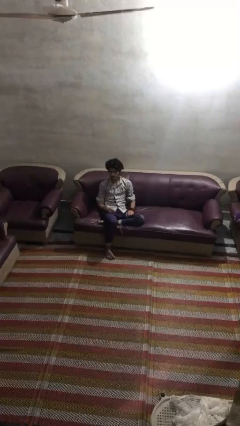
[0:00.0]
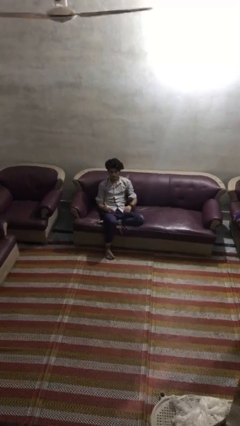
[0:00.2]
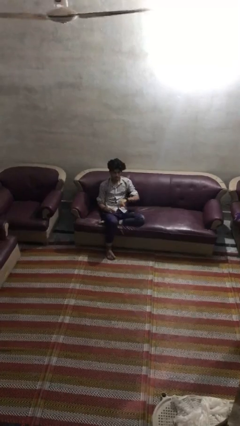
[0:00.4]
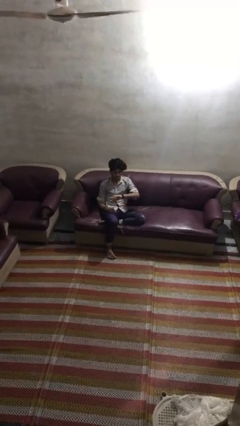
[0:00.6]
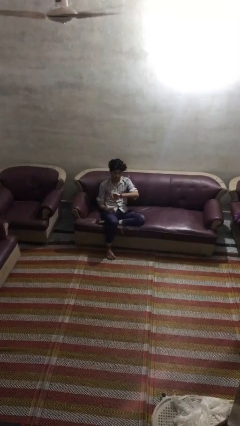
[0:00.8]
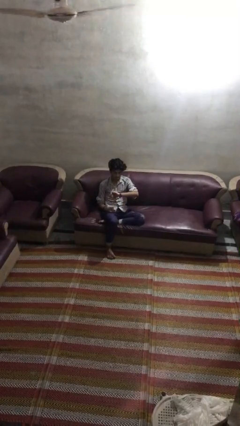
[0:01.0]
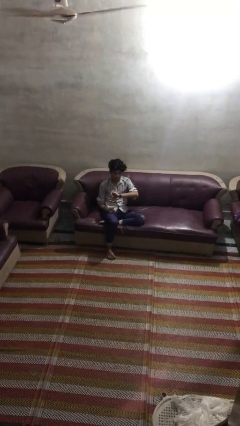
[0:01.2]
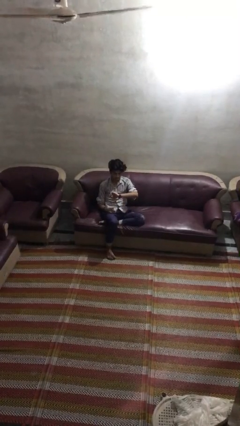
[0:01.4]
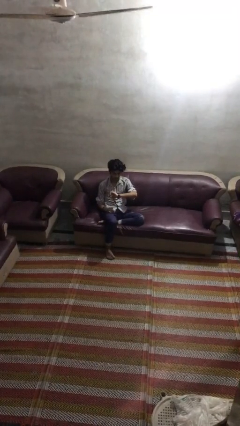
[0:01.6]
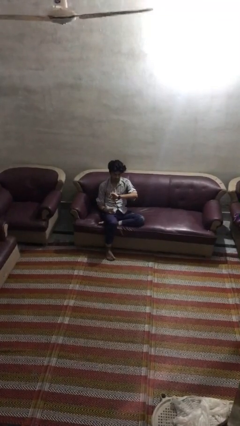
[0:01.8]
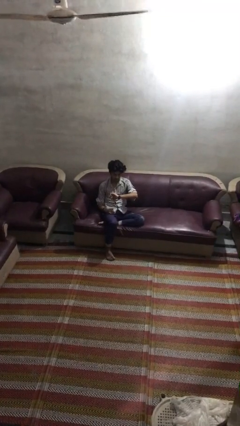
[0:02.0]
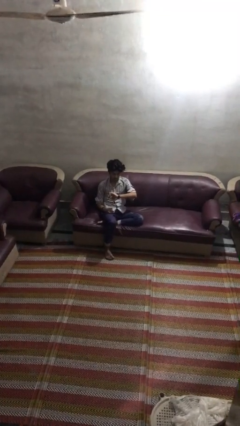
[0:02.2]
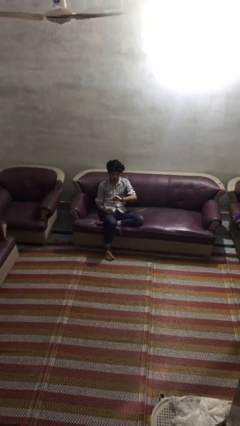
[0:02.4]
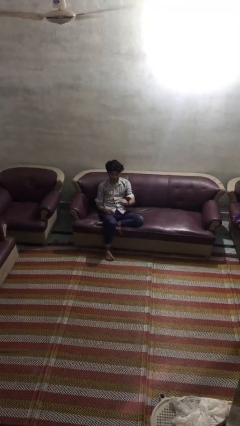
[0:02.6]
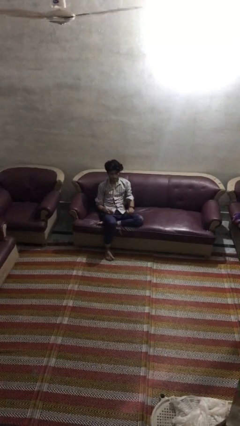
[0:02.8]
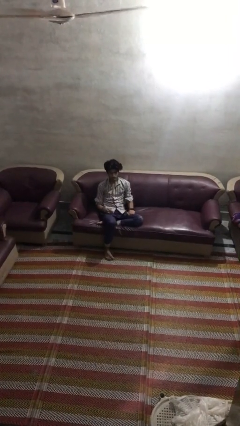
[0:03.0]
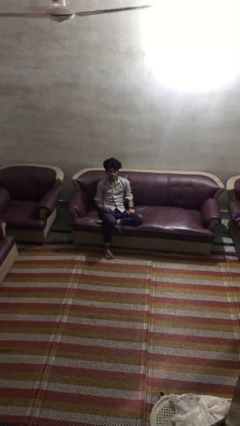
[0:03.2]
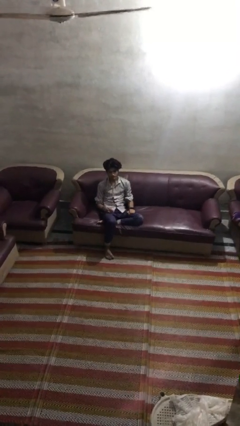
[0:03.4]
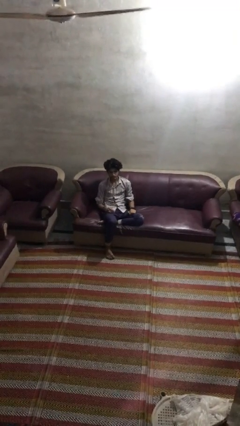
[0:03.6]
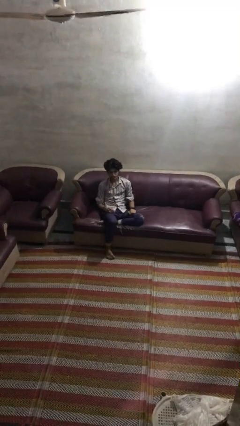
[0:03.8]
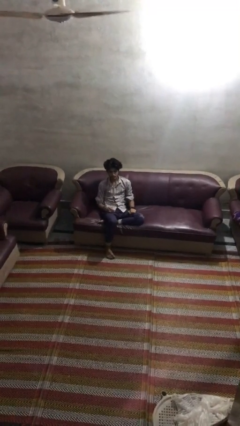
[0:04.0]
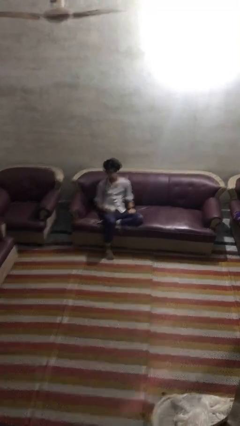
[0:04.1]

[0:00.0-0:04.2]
person looks at wristwatch

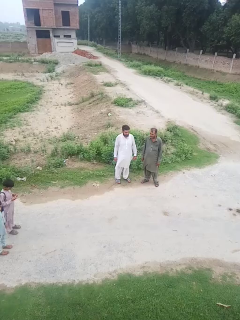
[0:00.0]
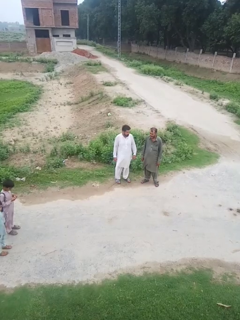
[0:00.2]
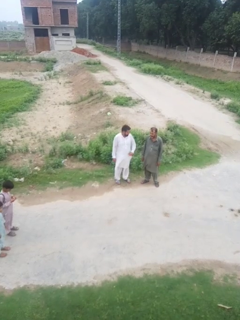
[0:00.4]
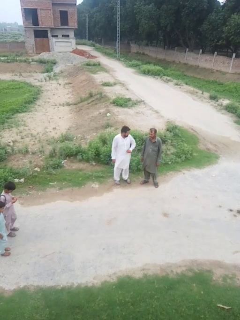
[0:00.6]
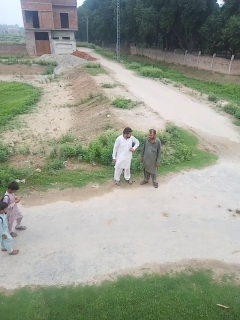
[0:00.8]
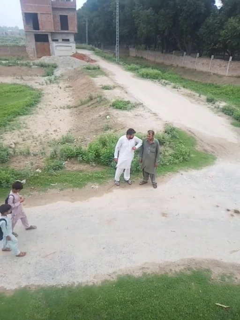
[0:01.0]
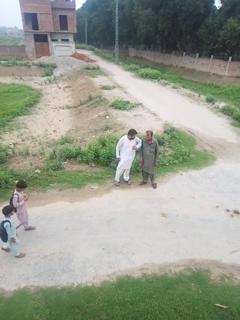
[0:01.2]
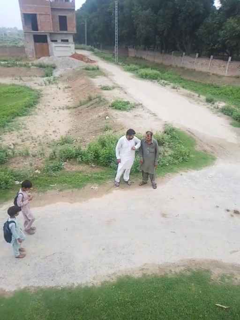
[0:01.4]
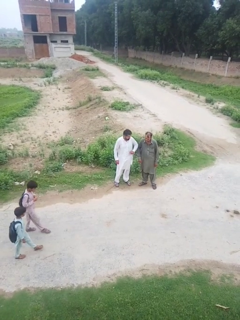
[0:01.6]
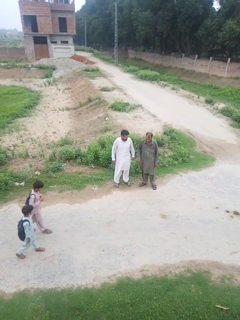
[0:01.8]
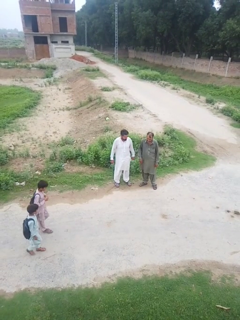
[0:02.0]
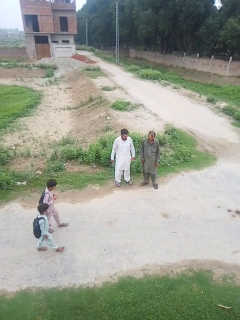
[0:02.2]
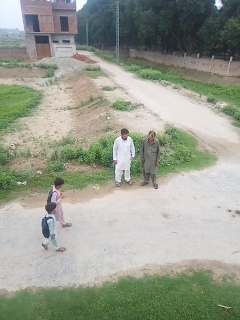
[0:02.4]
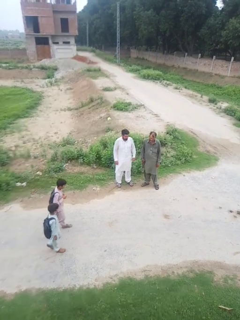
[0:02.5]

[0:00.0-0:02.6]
person nudges person with elbow

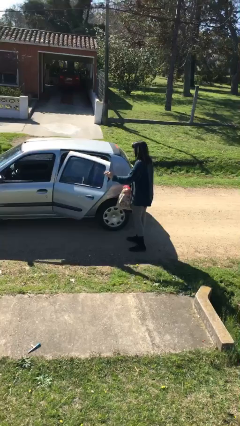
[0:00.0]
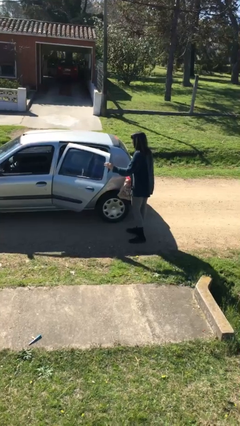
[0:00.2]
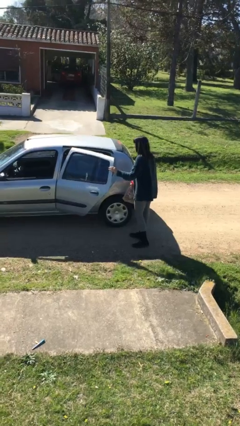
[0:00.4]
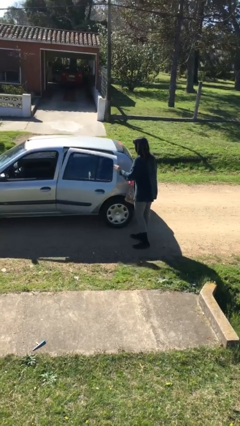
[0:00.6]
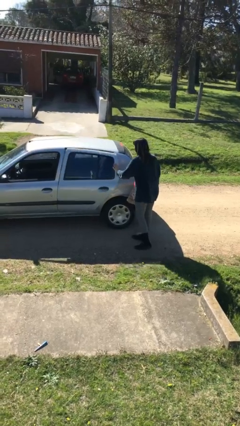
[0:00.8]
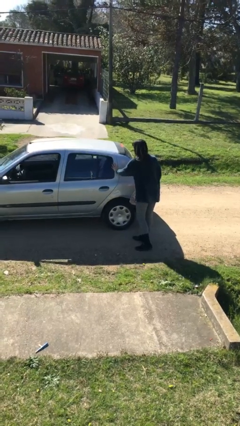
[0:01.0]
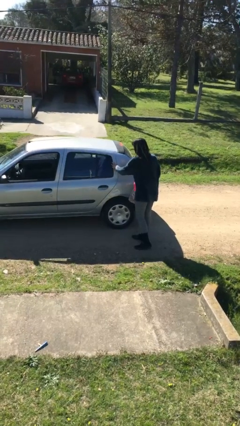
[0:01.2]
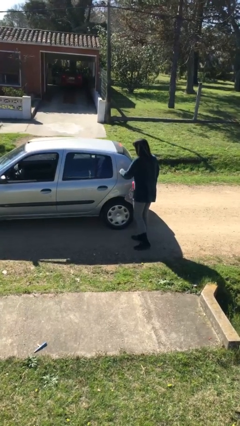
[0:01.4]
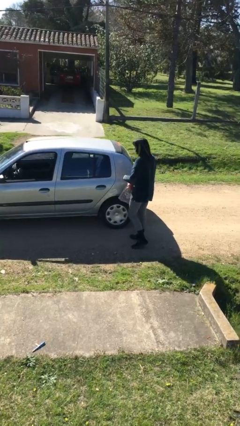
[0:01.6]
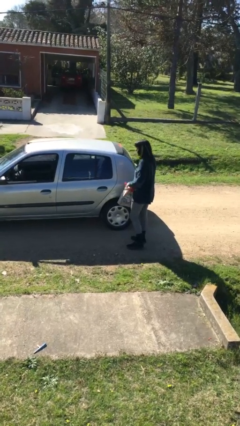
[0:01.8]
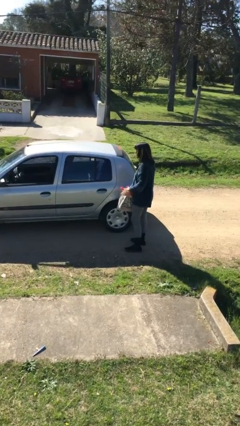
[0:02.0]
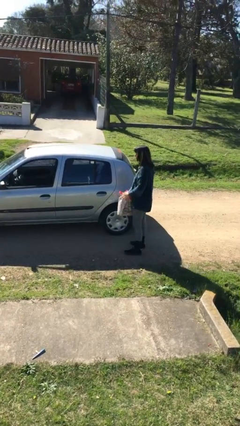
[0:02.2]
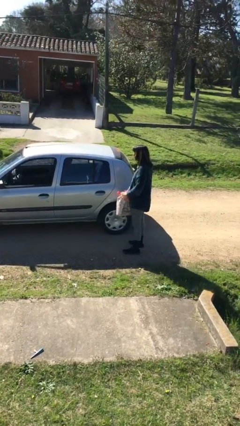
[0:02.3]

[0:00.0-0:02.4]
person closes car door

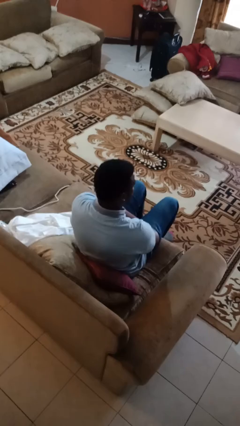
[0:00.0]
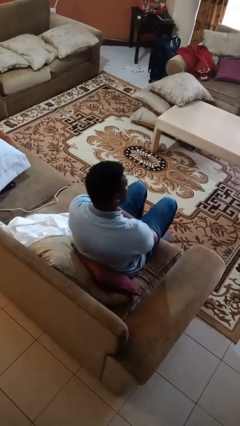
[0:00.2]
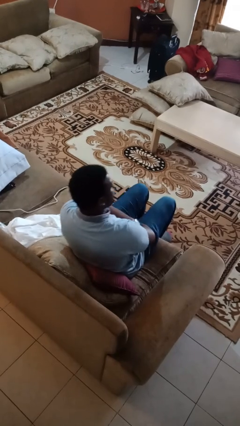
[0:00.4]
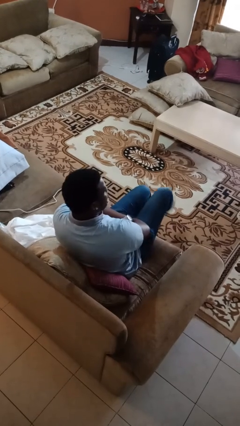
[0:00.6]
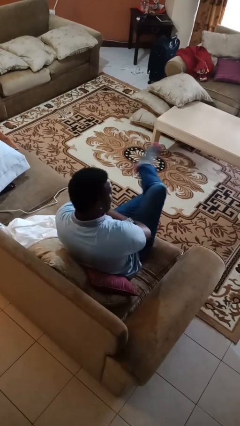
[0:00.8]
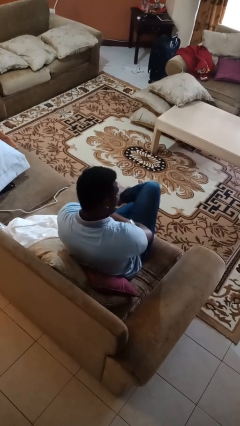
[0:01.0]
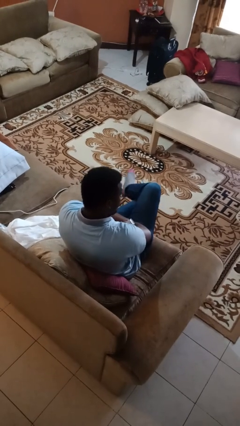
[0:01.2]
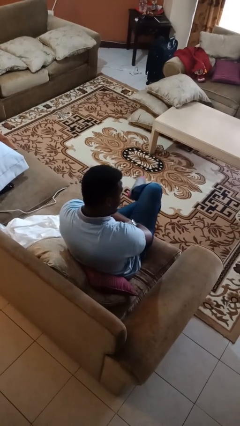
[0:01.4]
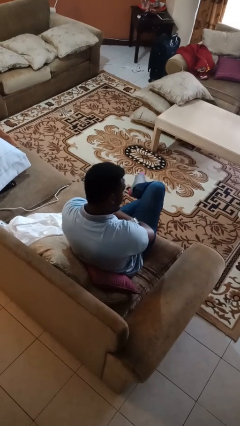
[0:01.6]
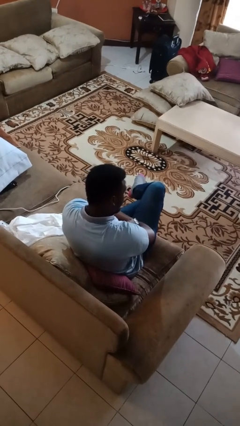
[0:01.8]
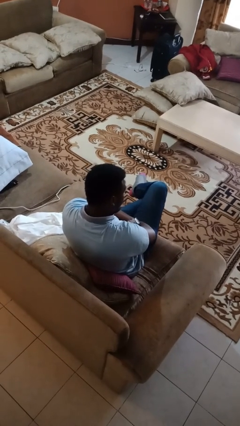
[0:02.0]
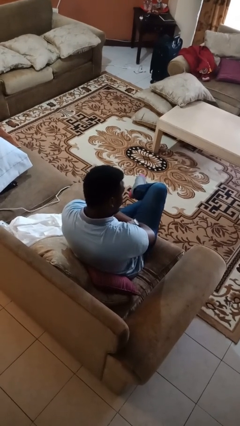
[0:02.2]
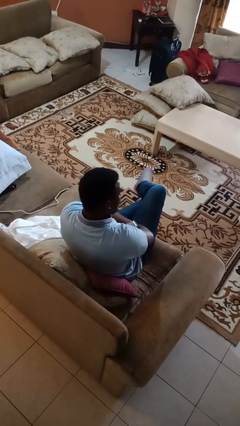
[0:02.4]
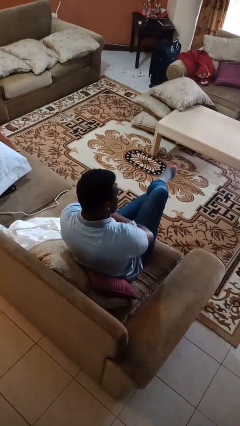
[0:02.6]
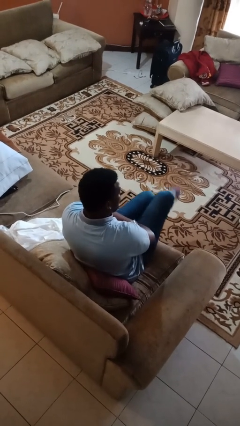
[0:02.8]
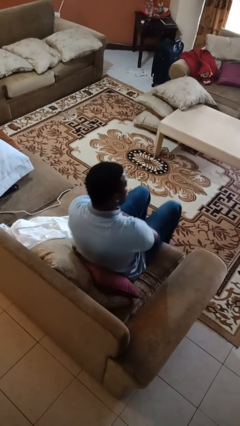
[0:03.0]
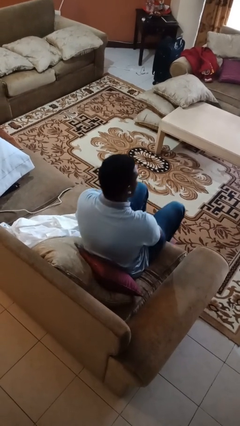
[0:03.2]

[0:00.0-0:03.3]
person crosses legs

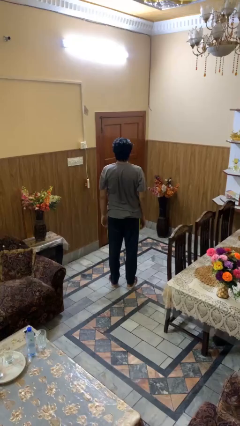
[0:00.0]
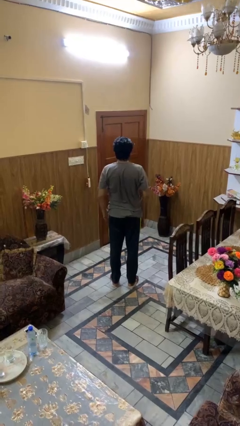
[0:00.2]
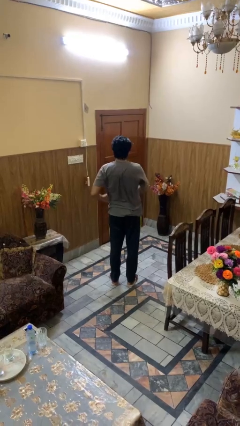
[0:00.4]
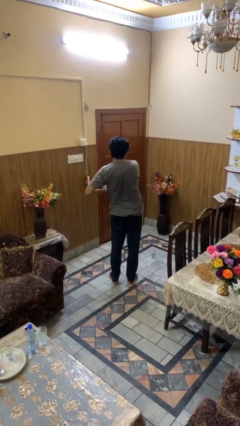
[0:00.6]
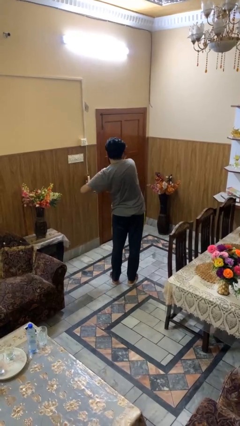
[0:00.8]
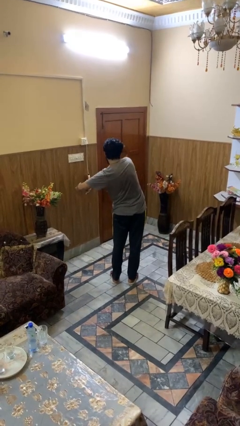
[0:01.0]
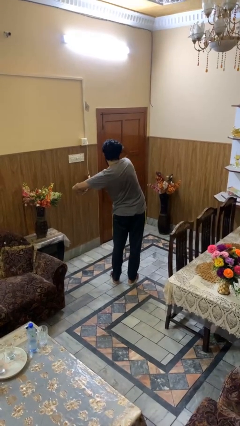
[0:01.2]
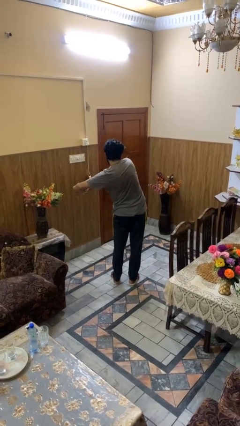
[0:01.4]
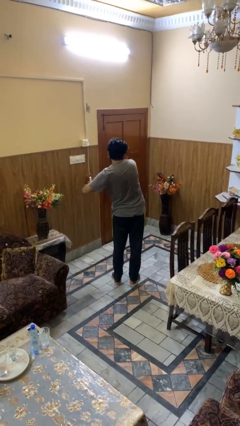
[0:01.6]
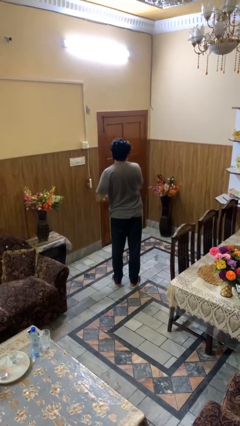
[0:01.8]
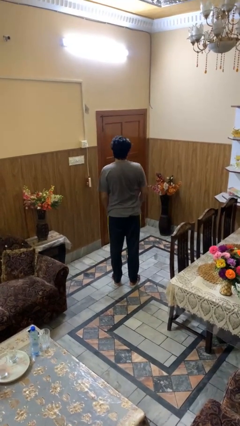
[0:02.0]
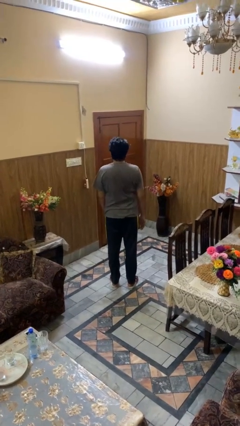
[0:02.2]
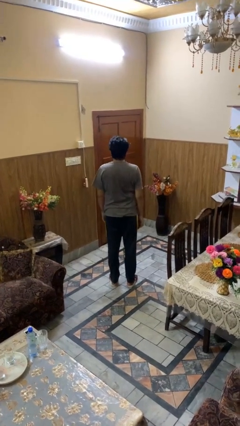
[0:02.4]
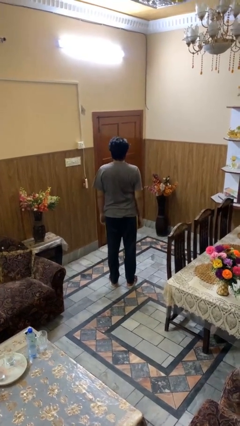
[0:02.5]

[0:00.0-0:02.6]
person stretches arms to side

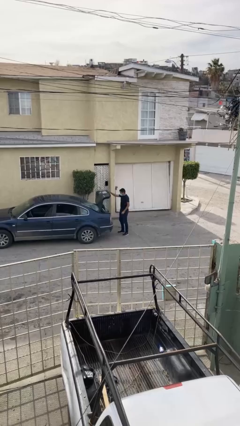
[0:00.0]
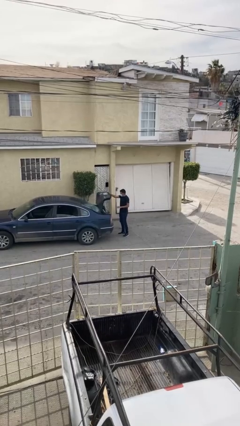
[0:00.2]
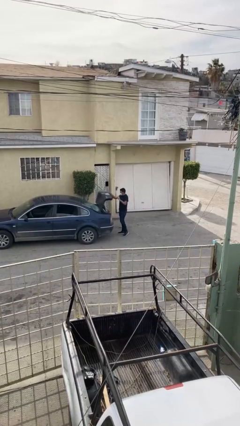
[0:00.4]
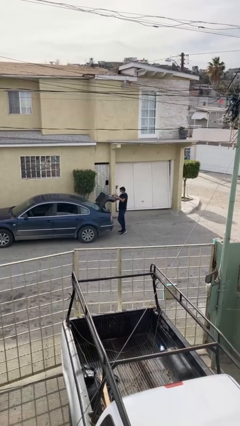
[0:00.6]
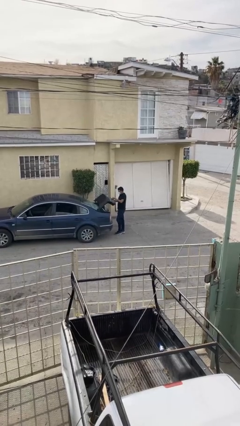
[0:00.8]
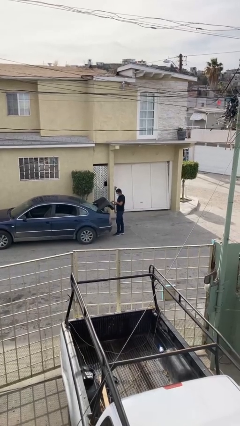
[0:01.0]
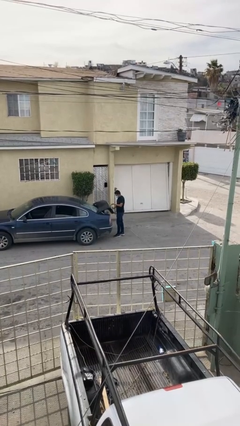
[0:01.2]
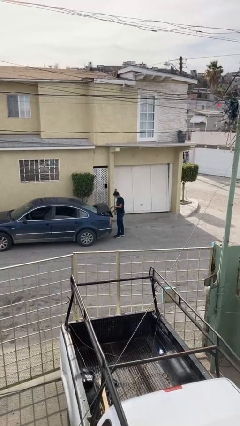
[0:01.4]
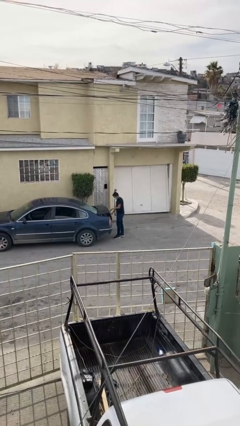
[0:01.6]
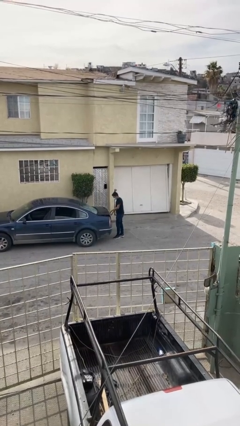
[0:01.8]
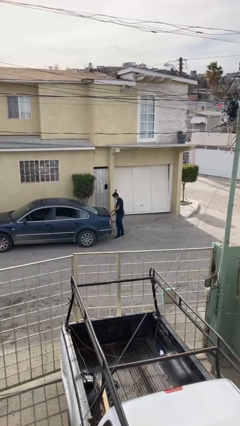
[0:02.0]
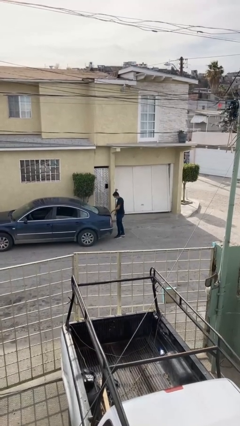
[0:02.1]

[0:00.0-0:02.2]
person closes car trunk

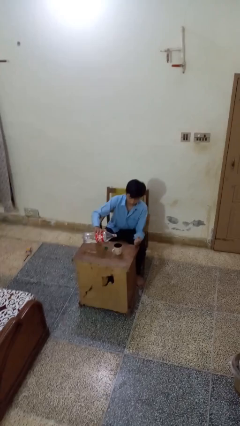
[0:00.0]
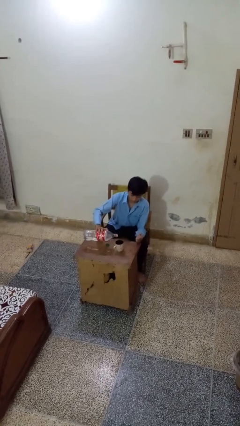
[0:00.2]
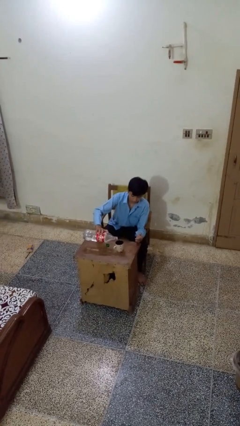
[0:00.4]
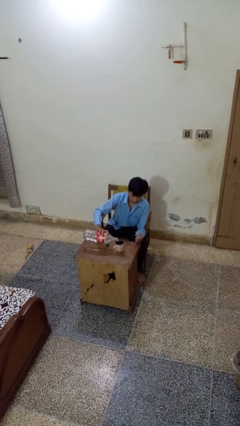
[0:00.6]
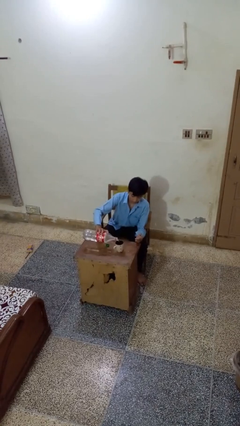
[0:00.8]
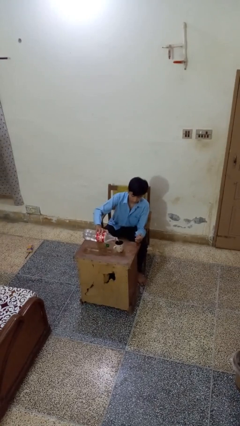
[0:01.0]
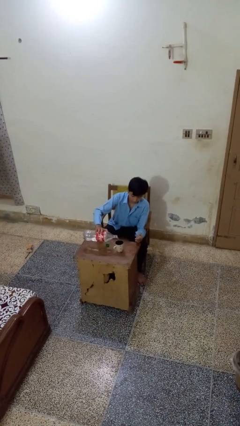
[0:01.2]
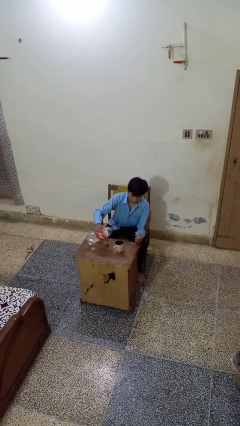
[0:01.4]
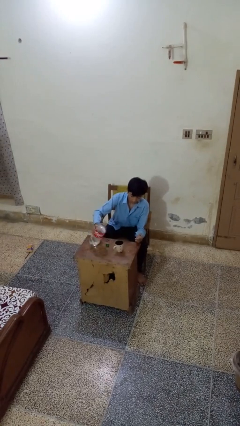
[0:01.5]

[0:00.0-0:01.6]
person pours liquid into cup
